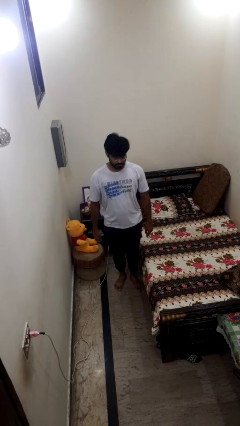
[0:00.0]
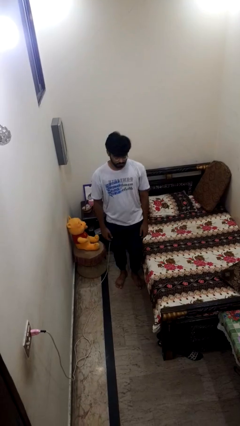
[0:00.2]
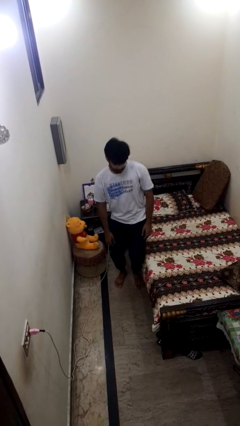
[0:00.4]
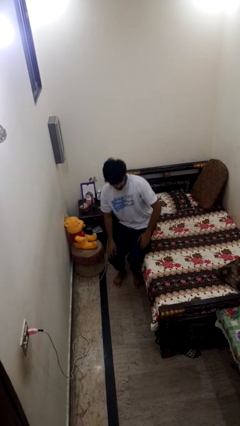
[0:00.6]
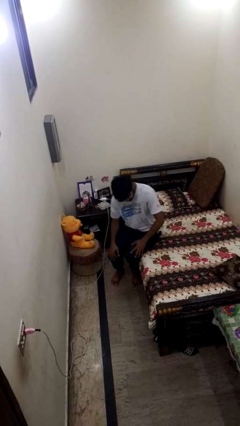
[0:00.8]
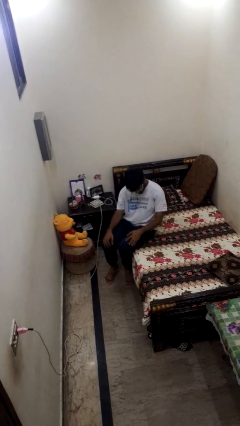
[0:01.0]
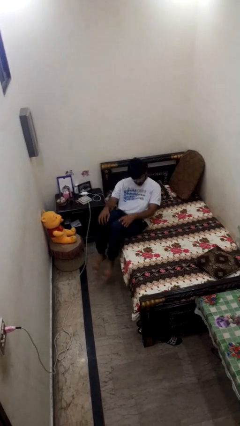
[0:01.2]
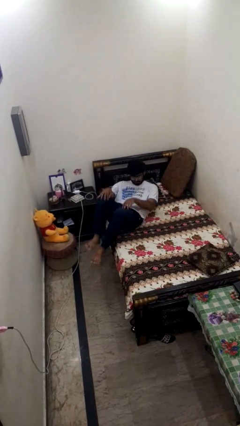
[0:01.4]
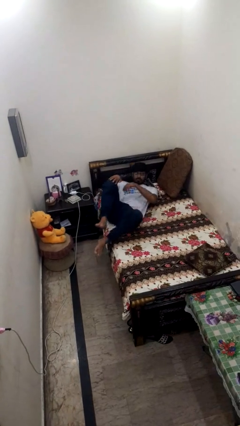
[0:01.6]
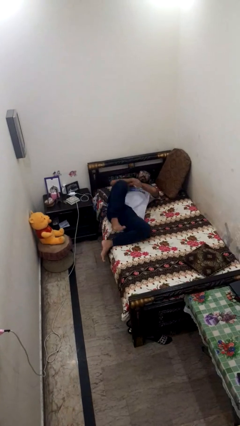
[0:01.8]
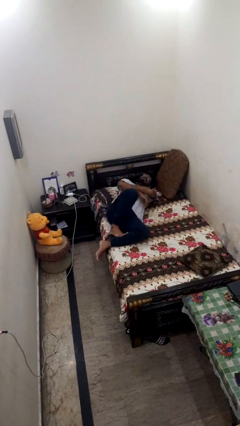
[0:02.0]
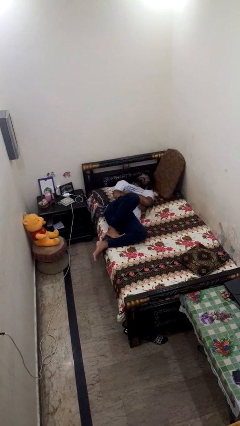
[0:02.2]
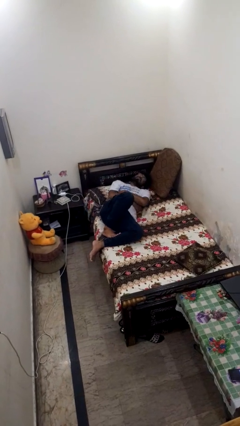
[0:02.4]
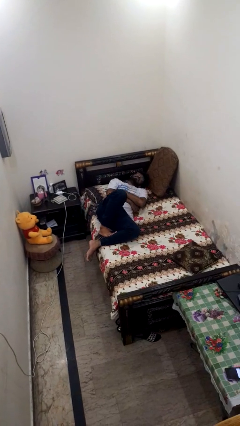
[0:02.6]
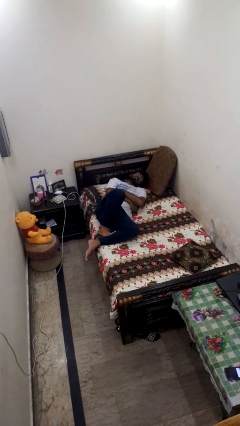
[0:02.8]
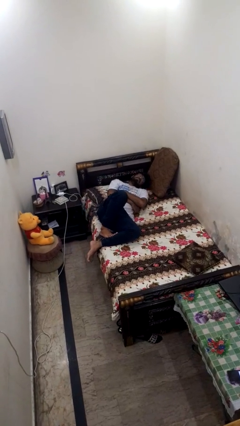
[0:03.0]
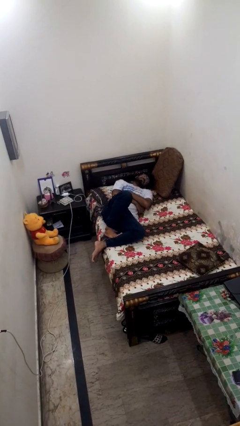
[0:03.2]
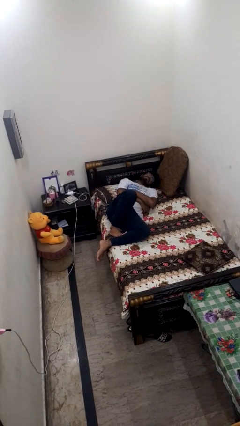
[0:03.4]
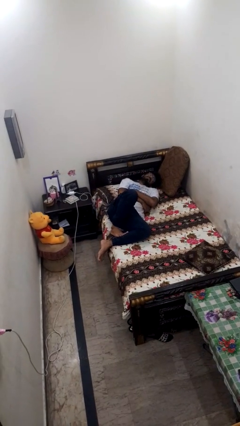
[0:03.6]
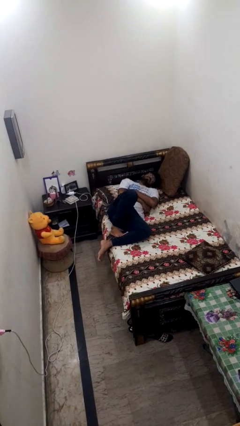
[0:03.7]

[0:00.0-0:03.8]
person lies down on bed

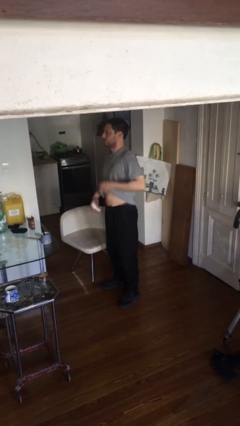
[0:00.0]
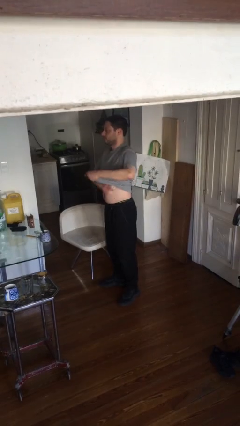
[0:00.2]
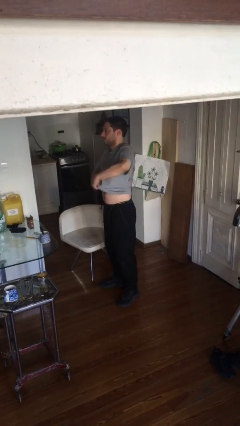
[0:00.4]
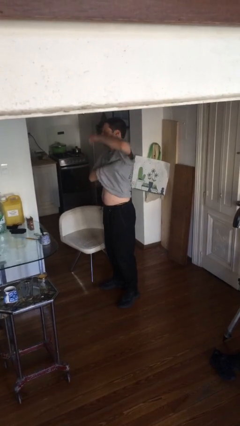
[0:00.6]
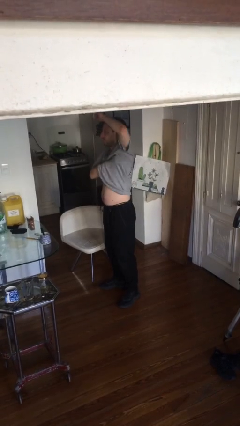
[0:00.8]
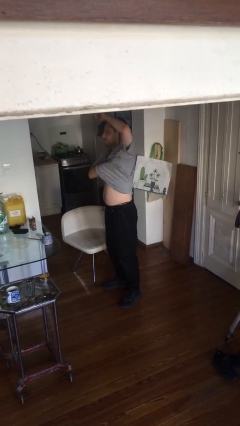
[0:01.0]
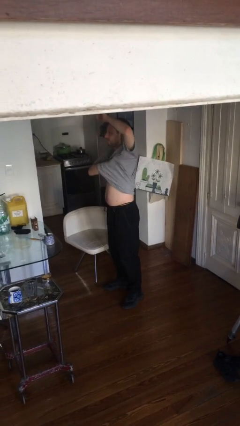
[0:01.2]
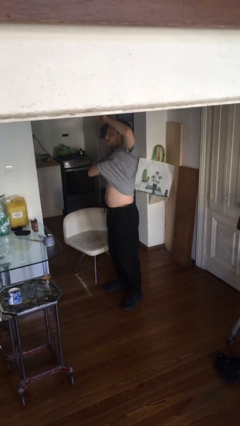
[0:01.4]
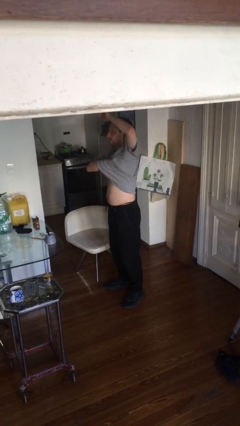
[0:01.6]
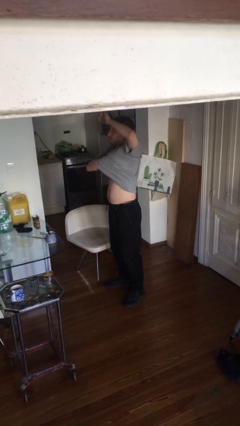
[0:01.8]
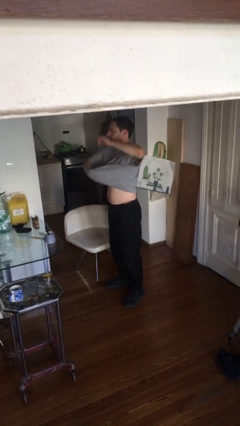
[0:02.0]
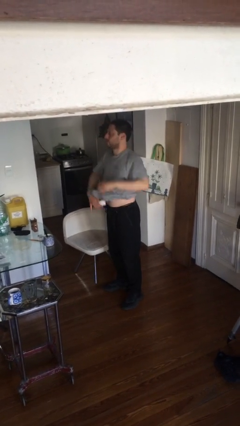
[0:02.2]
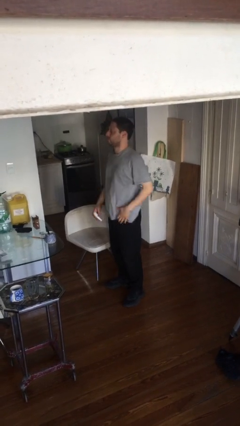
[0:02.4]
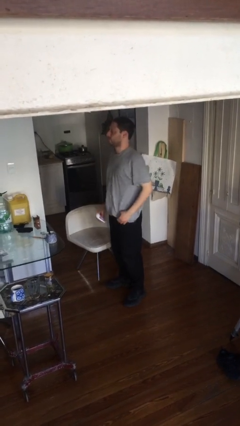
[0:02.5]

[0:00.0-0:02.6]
person applies deodorant

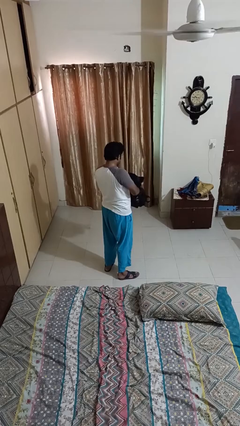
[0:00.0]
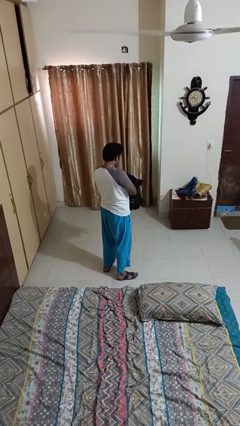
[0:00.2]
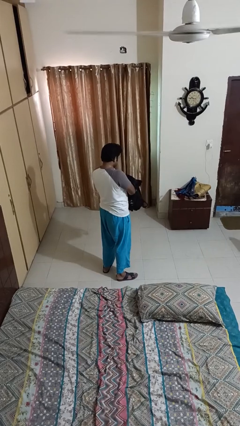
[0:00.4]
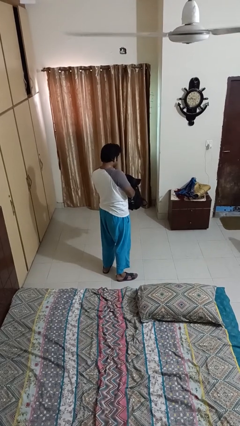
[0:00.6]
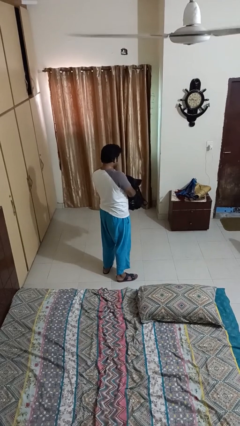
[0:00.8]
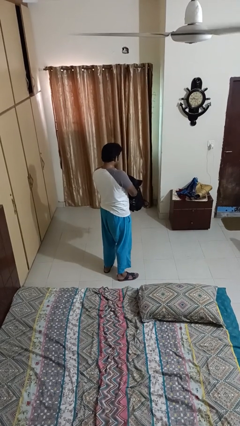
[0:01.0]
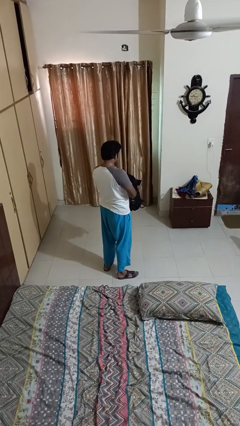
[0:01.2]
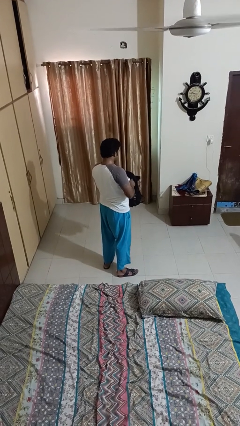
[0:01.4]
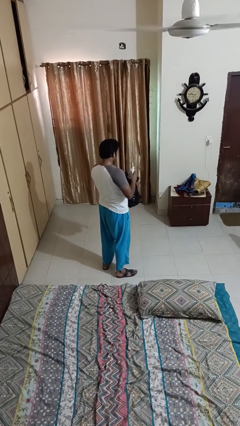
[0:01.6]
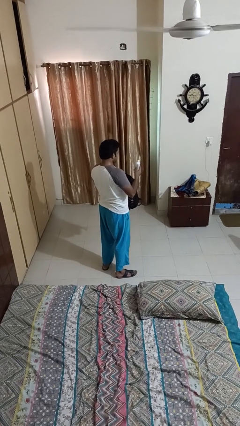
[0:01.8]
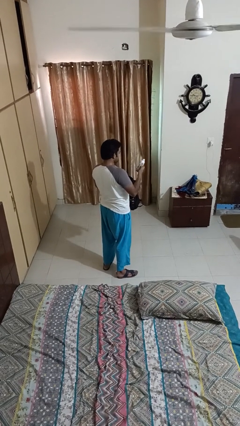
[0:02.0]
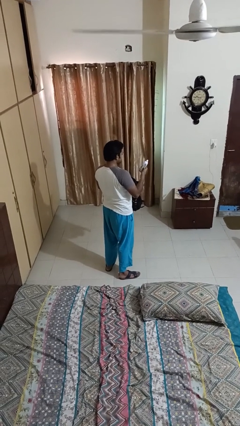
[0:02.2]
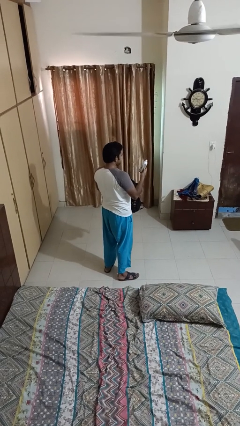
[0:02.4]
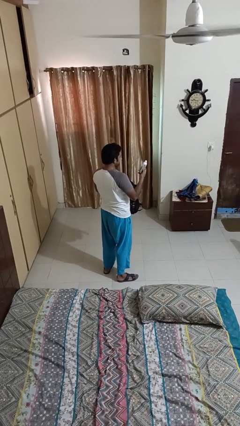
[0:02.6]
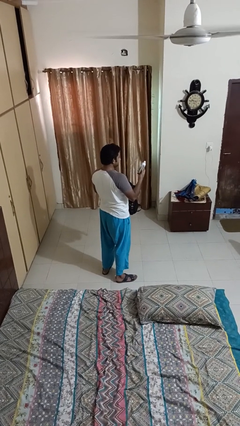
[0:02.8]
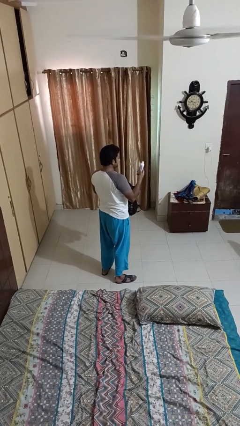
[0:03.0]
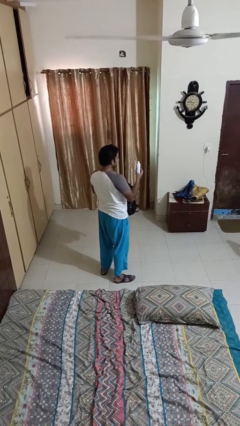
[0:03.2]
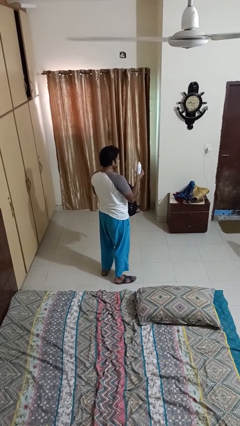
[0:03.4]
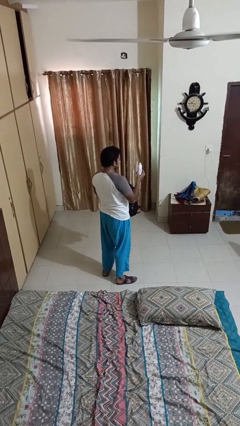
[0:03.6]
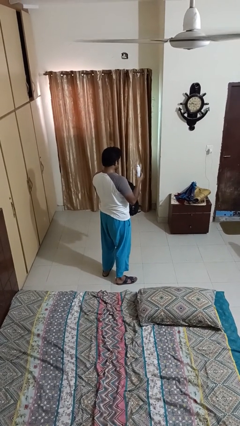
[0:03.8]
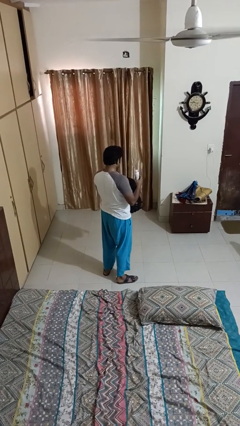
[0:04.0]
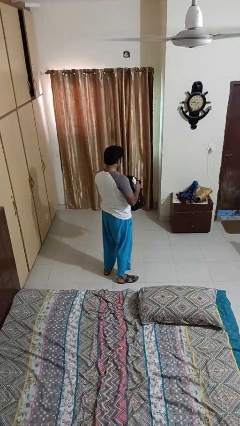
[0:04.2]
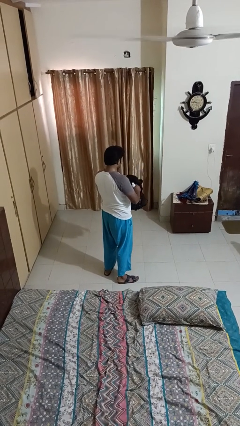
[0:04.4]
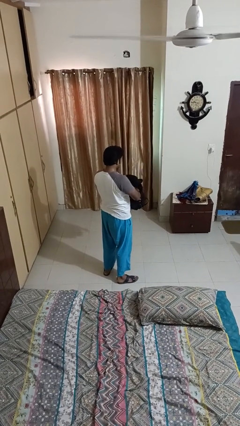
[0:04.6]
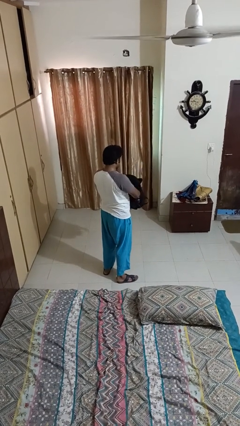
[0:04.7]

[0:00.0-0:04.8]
person lies down on couch

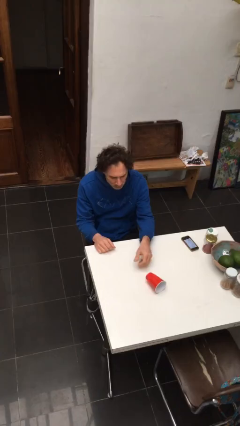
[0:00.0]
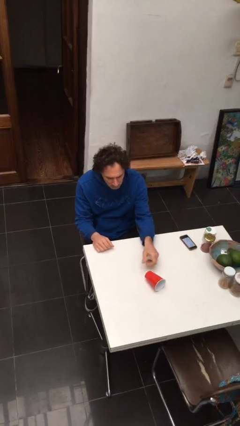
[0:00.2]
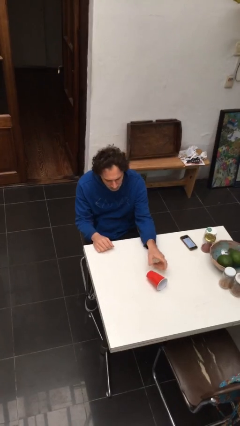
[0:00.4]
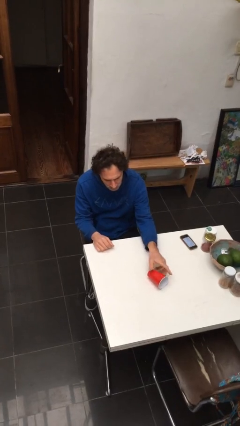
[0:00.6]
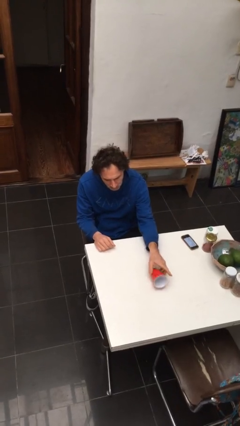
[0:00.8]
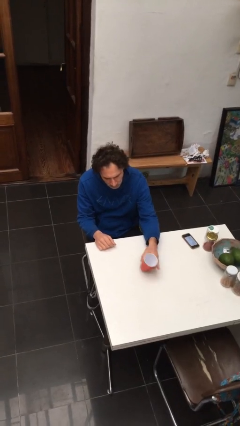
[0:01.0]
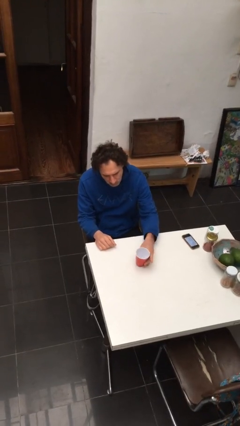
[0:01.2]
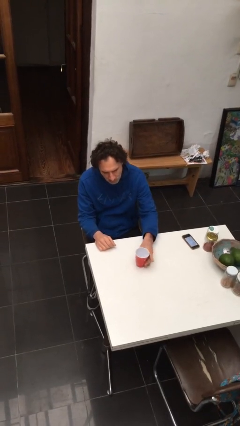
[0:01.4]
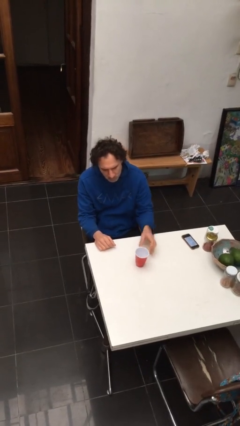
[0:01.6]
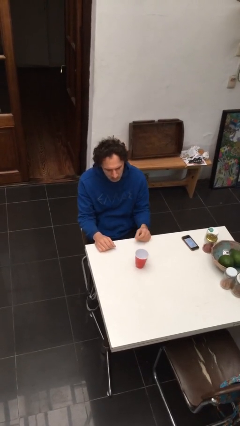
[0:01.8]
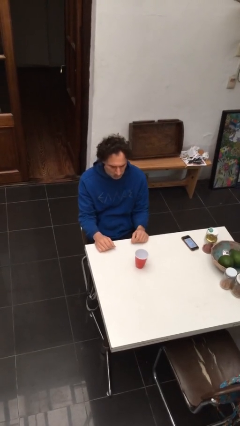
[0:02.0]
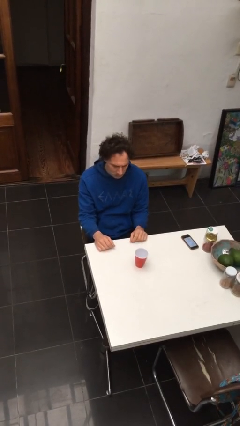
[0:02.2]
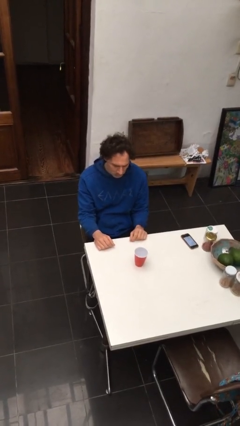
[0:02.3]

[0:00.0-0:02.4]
person sets upright glass

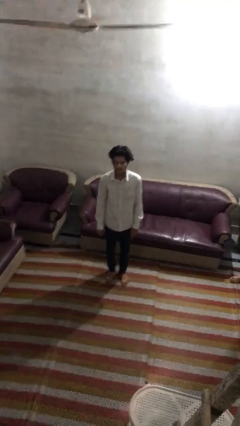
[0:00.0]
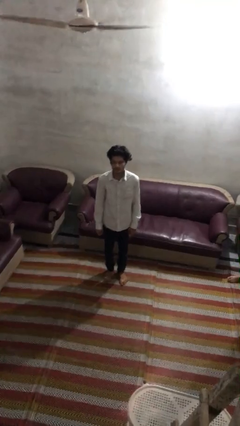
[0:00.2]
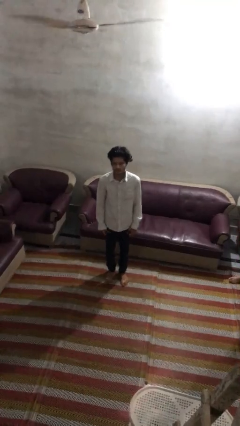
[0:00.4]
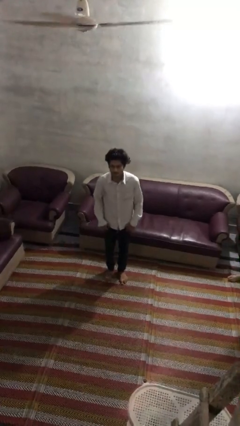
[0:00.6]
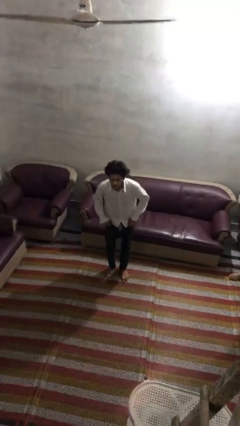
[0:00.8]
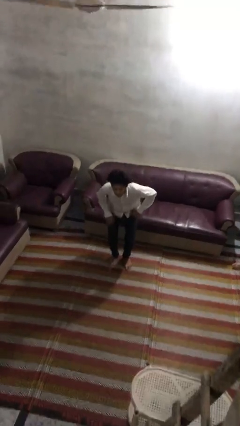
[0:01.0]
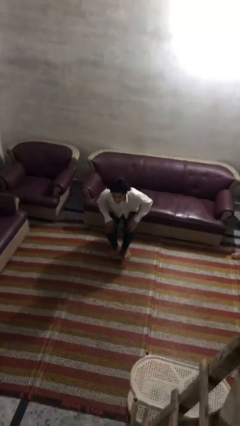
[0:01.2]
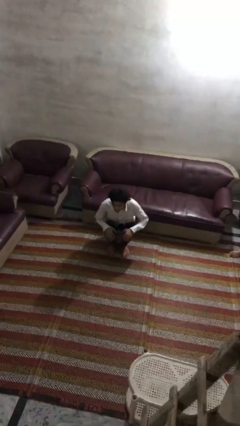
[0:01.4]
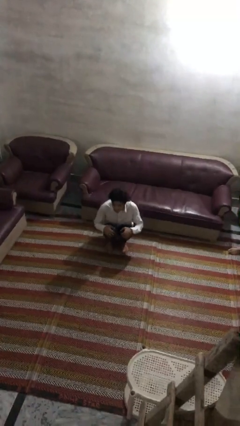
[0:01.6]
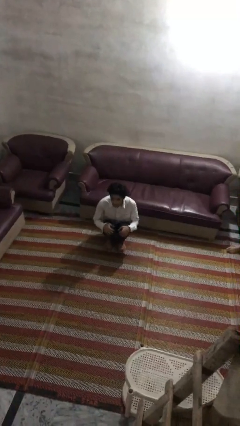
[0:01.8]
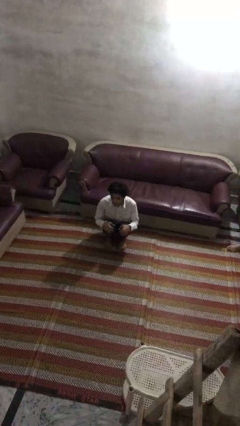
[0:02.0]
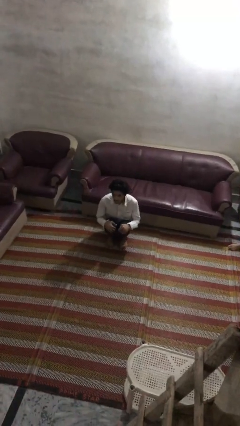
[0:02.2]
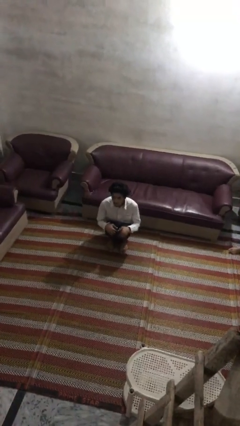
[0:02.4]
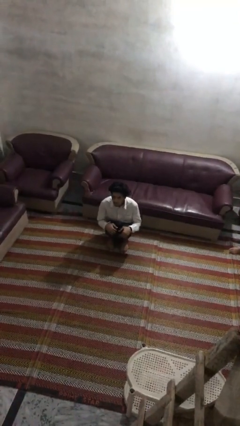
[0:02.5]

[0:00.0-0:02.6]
person squats

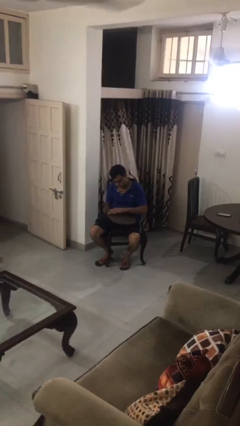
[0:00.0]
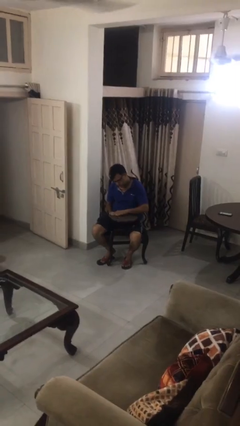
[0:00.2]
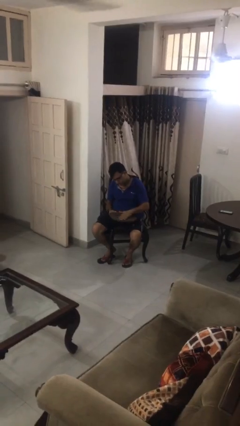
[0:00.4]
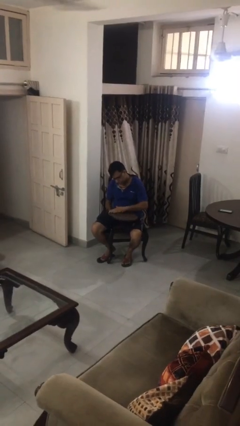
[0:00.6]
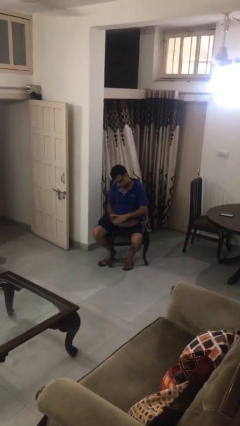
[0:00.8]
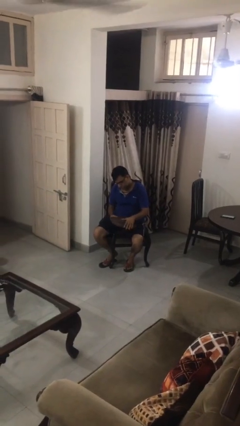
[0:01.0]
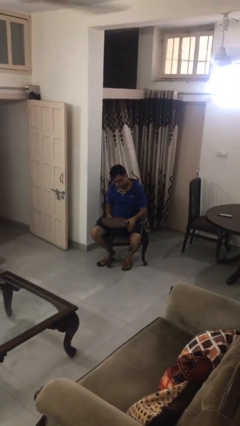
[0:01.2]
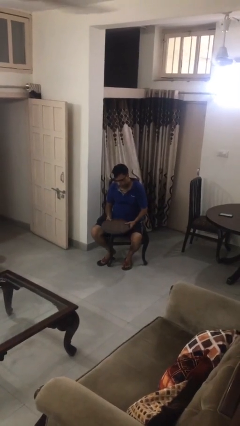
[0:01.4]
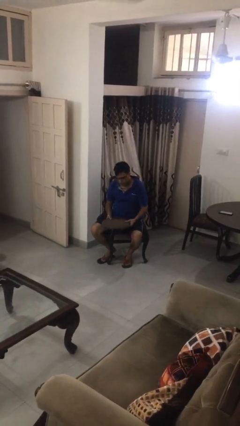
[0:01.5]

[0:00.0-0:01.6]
person waves hand over object
